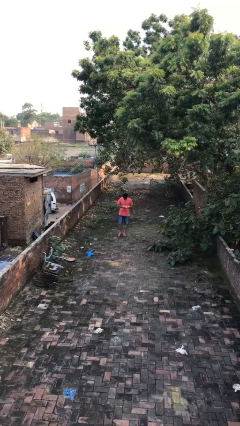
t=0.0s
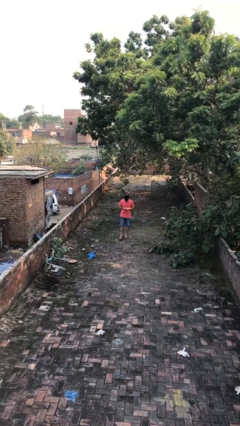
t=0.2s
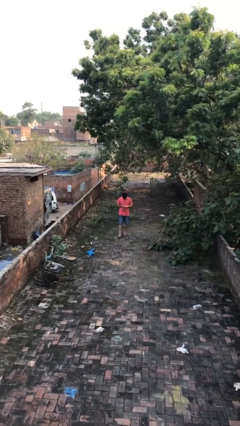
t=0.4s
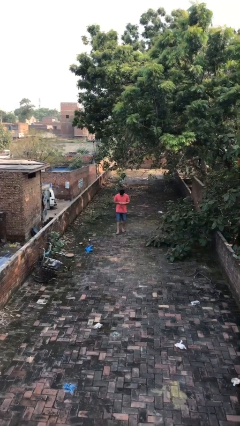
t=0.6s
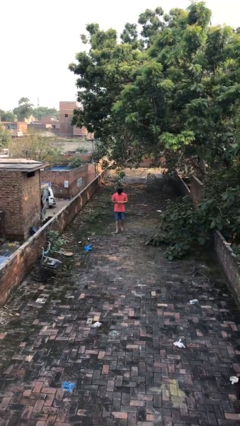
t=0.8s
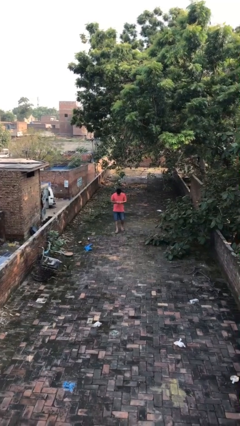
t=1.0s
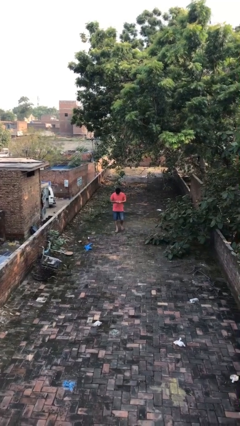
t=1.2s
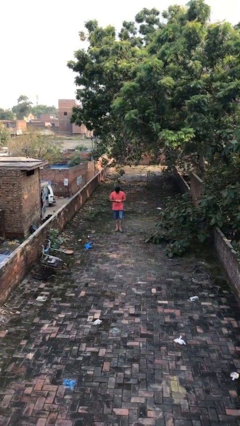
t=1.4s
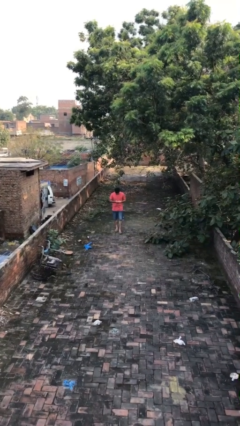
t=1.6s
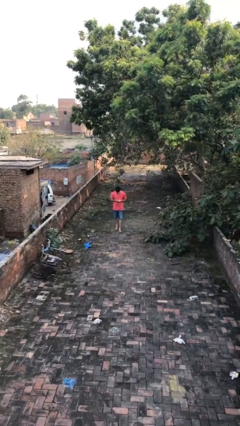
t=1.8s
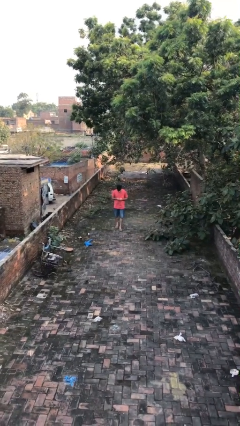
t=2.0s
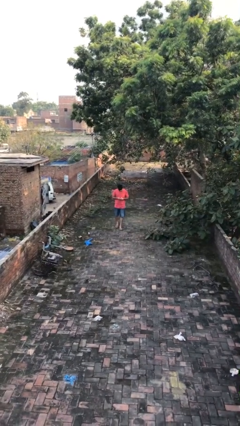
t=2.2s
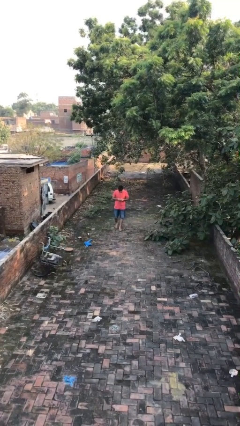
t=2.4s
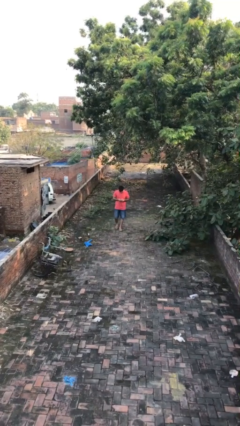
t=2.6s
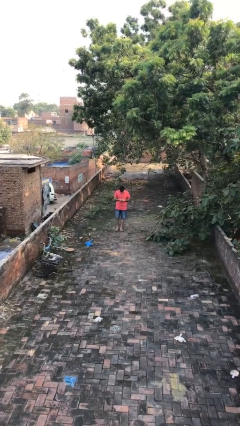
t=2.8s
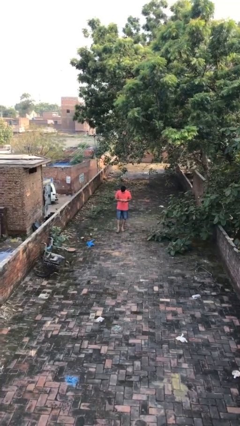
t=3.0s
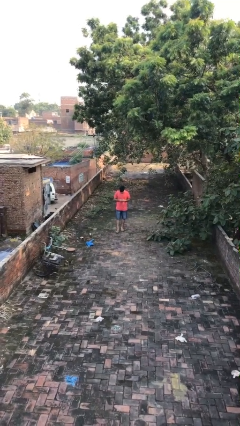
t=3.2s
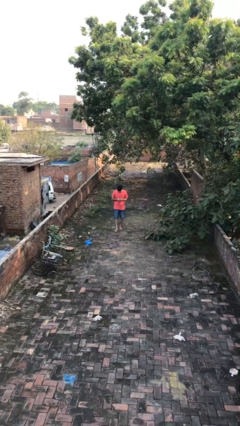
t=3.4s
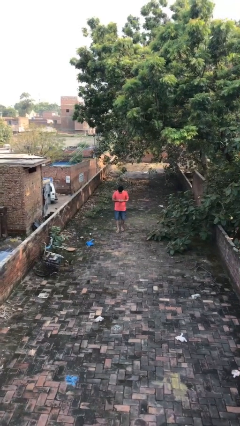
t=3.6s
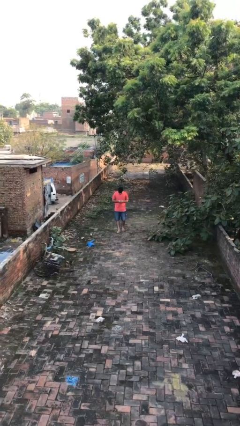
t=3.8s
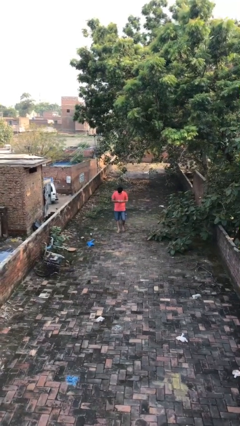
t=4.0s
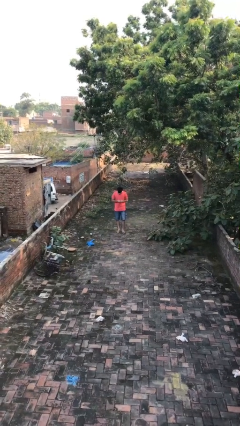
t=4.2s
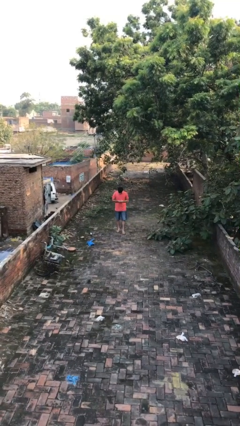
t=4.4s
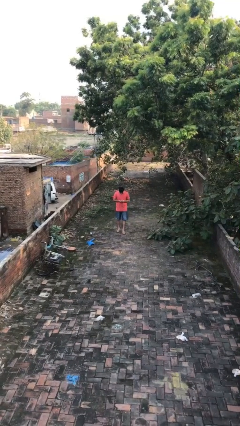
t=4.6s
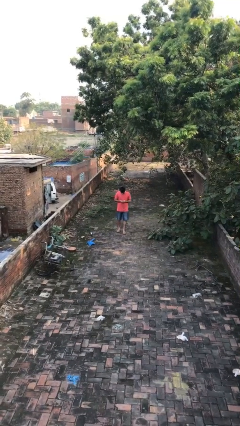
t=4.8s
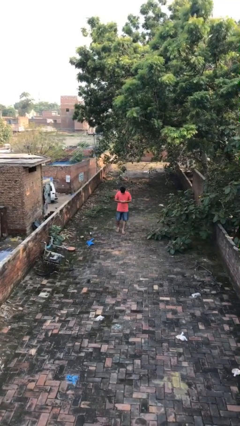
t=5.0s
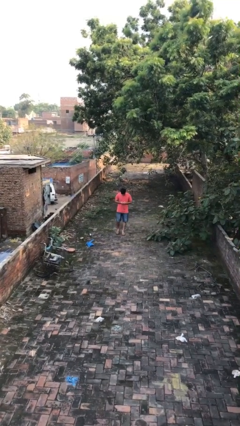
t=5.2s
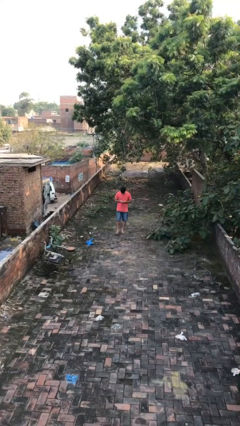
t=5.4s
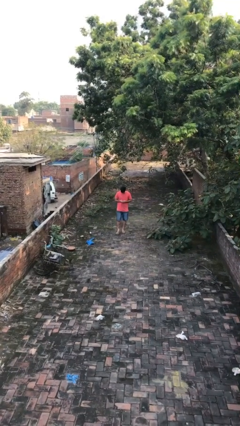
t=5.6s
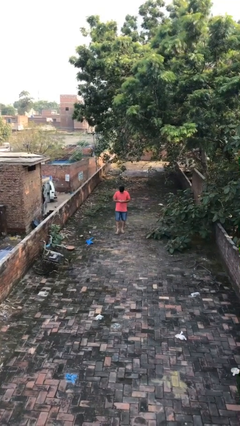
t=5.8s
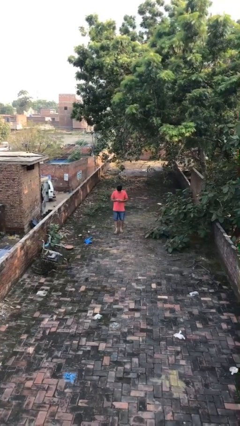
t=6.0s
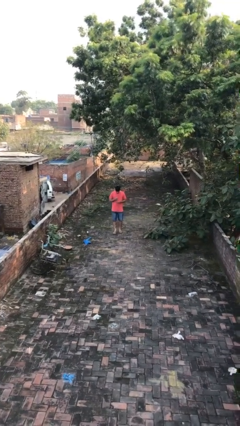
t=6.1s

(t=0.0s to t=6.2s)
person texts on phone

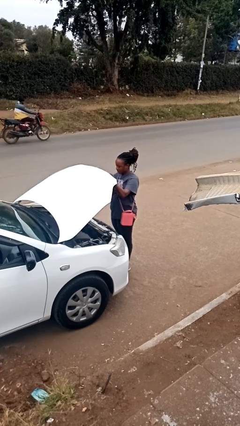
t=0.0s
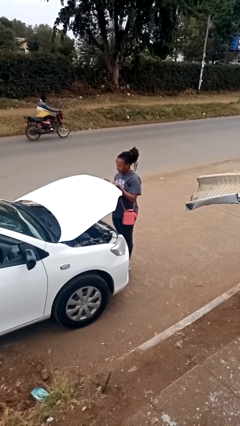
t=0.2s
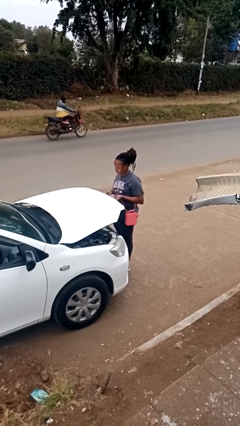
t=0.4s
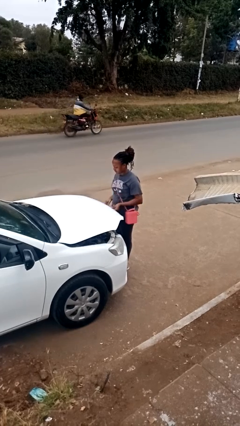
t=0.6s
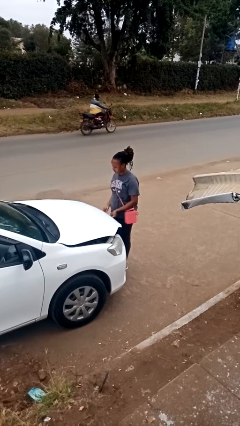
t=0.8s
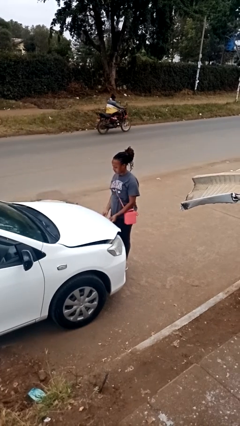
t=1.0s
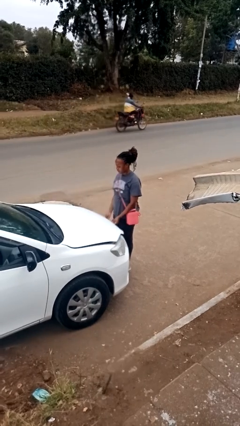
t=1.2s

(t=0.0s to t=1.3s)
person closes car hood

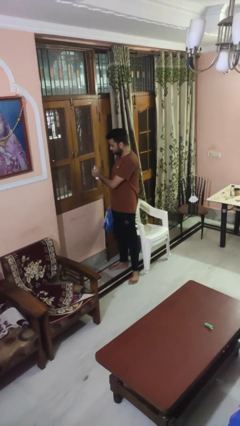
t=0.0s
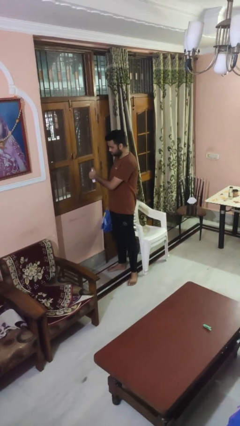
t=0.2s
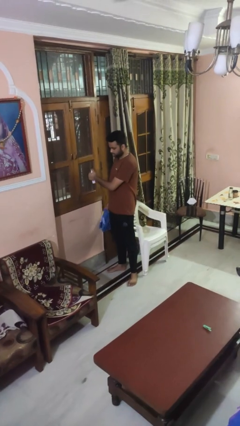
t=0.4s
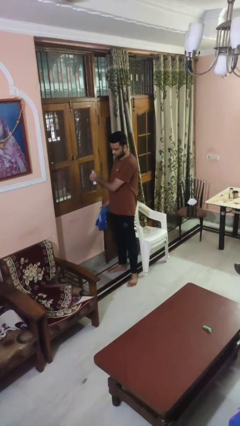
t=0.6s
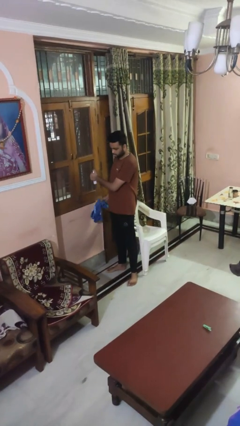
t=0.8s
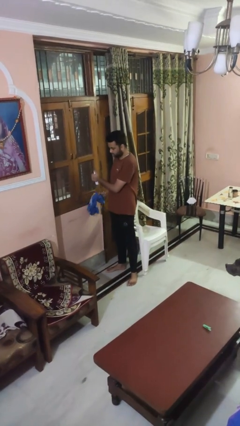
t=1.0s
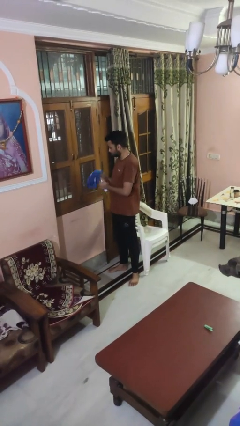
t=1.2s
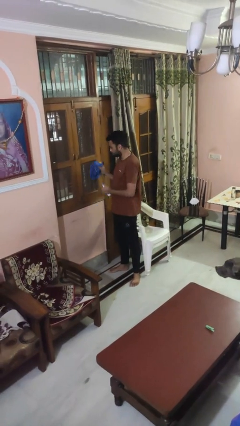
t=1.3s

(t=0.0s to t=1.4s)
person sprays from bottle

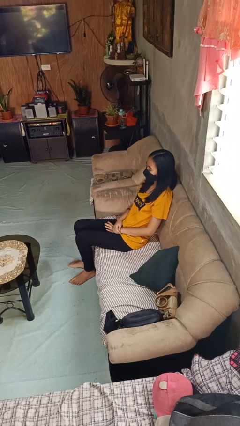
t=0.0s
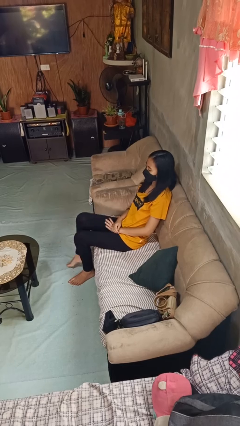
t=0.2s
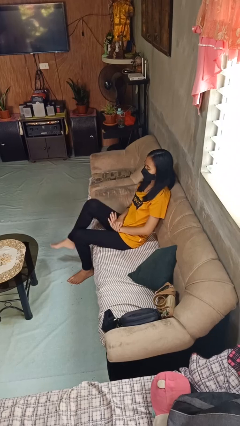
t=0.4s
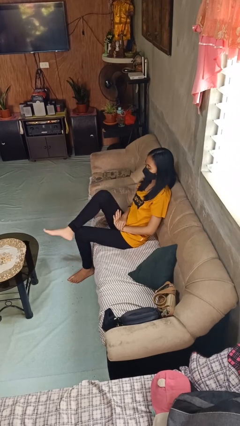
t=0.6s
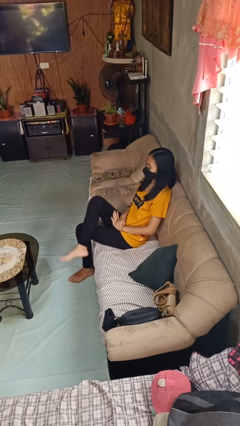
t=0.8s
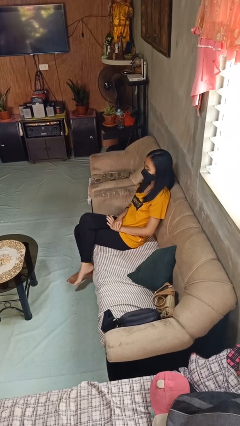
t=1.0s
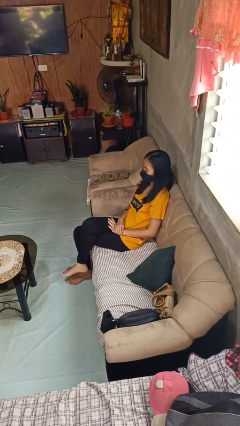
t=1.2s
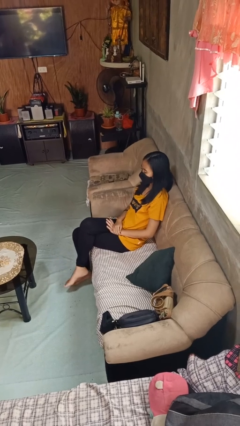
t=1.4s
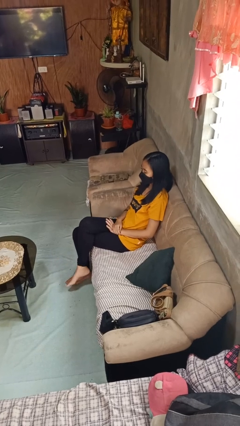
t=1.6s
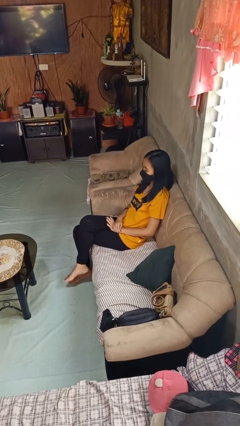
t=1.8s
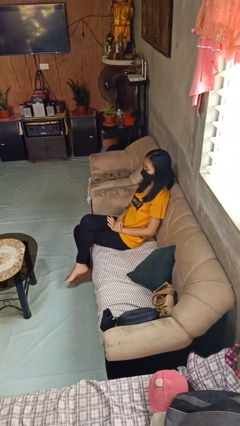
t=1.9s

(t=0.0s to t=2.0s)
person crosses legs

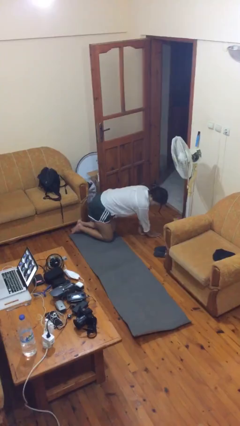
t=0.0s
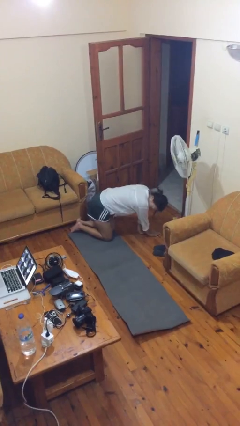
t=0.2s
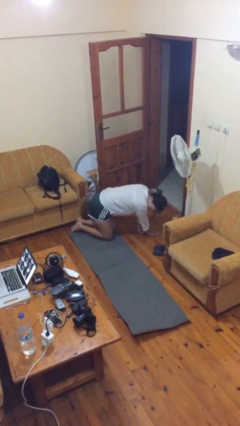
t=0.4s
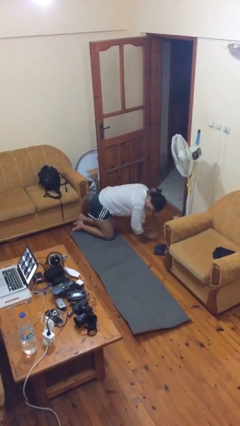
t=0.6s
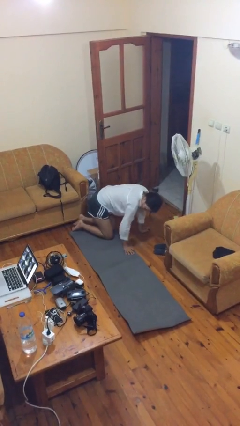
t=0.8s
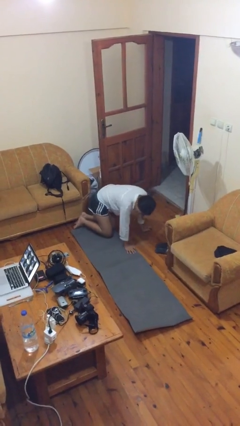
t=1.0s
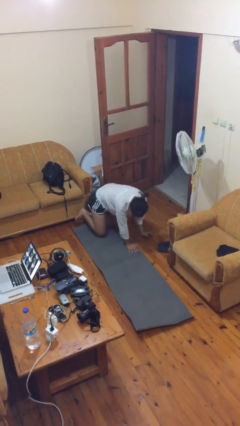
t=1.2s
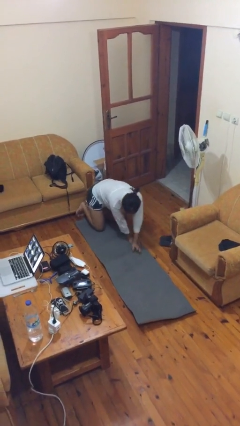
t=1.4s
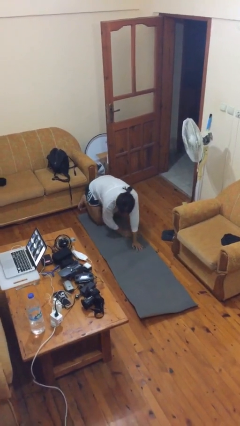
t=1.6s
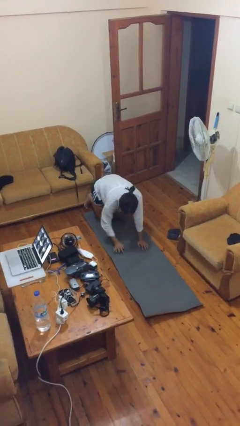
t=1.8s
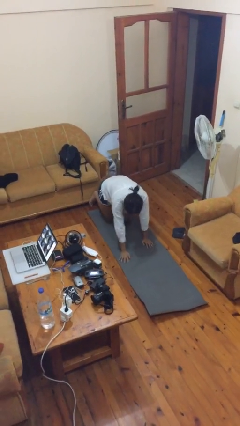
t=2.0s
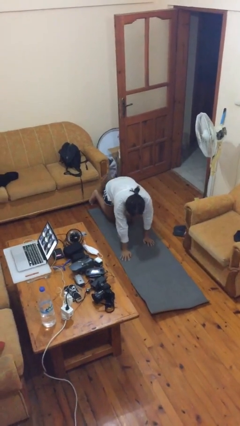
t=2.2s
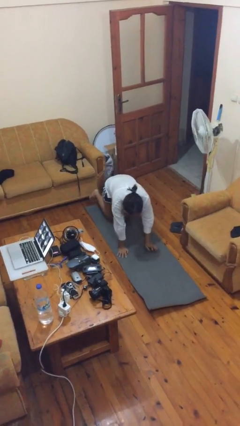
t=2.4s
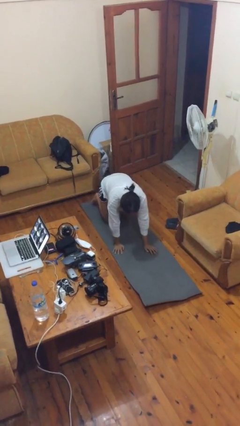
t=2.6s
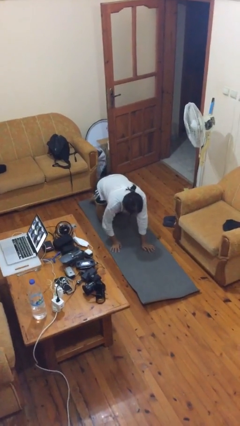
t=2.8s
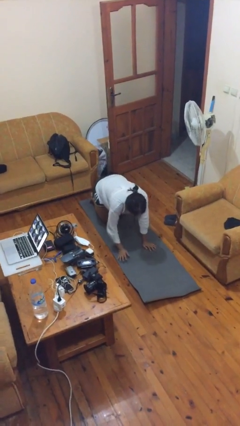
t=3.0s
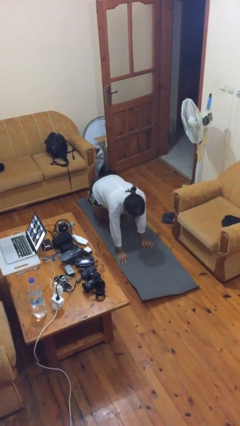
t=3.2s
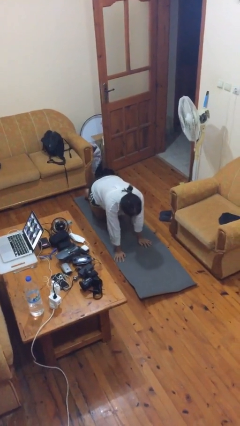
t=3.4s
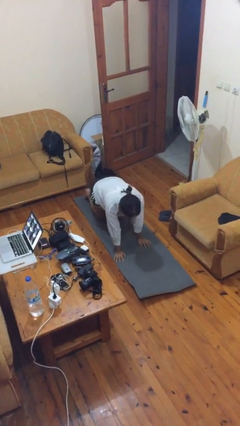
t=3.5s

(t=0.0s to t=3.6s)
person crawls

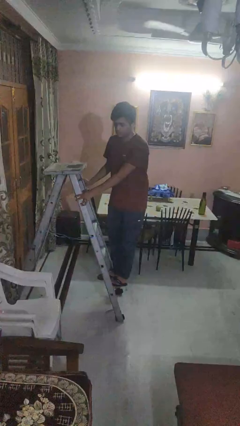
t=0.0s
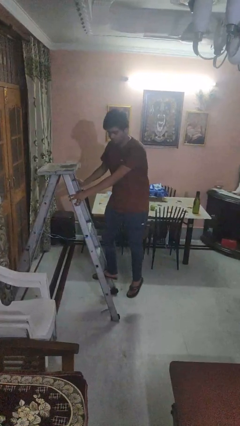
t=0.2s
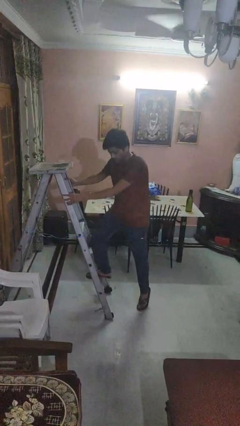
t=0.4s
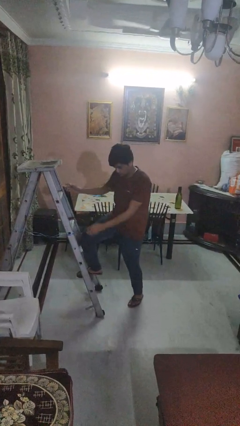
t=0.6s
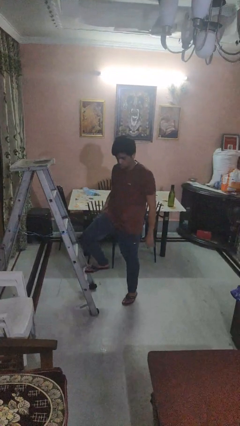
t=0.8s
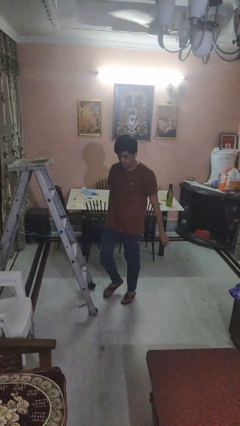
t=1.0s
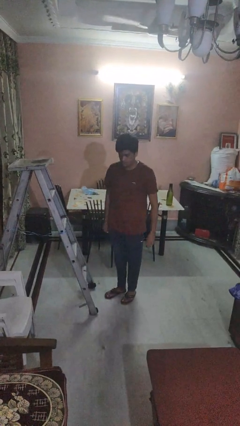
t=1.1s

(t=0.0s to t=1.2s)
person climbs down ladder

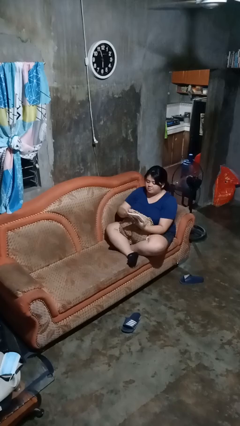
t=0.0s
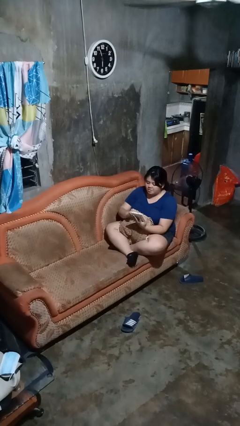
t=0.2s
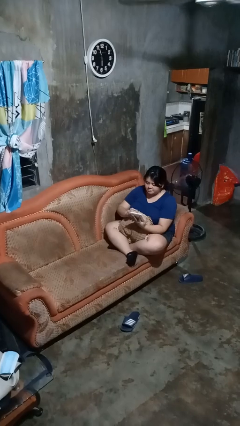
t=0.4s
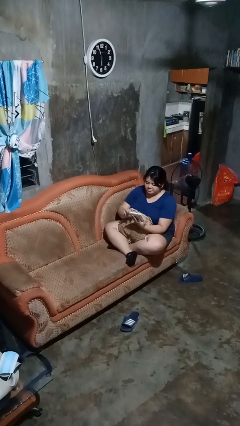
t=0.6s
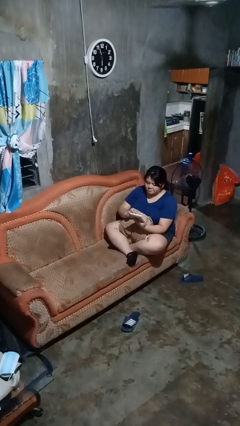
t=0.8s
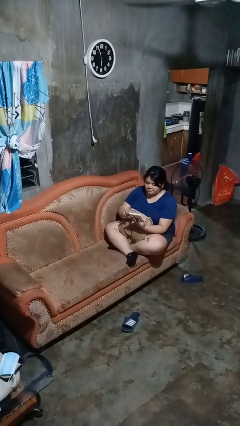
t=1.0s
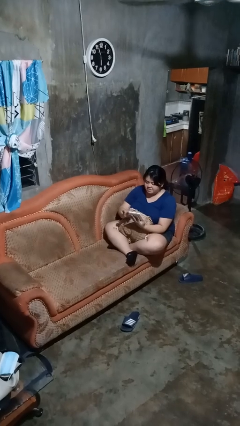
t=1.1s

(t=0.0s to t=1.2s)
person interacts with tablet

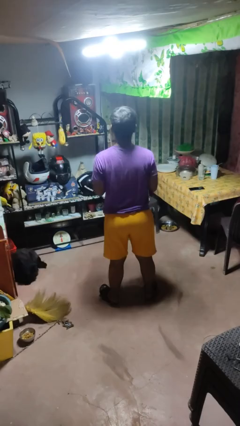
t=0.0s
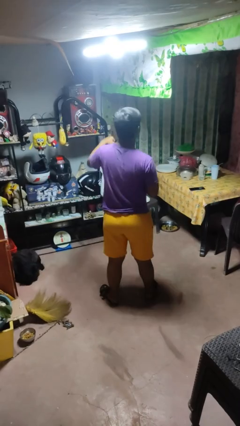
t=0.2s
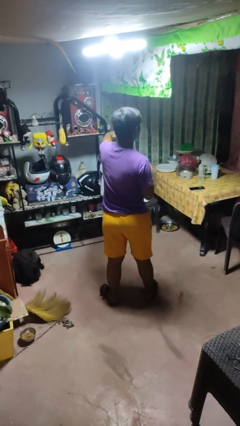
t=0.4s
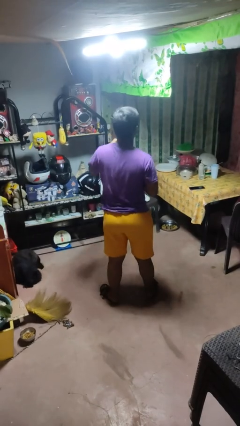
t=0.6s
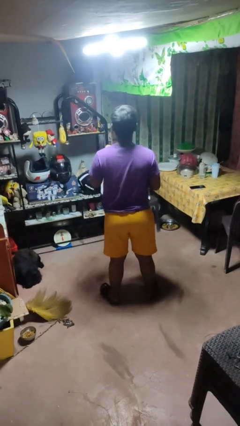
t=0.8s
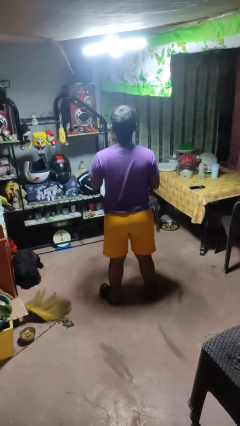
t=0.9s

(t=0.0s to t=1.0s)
person punches
